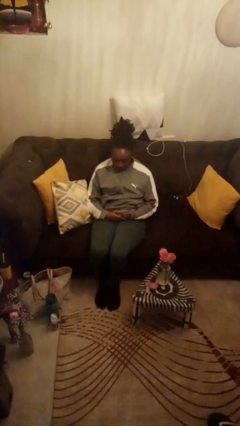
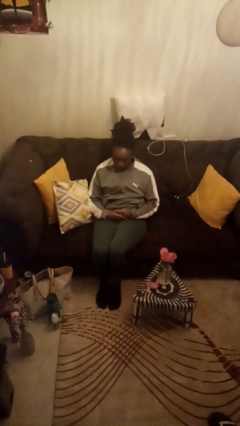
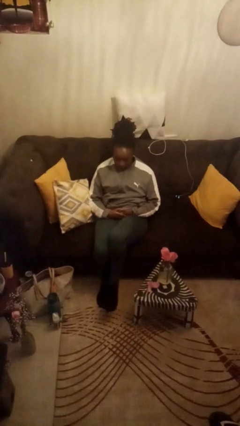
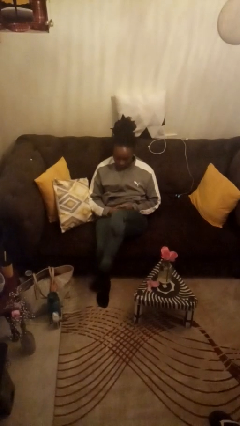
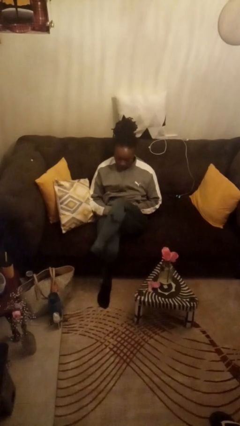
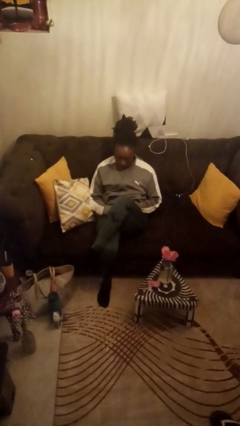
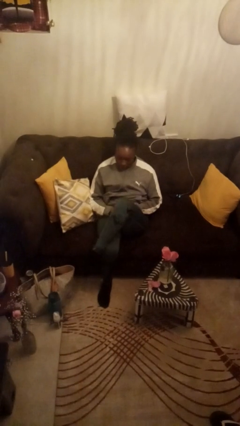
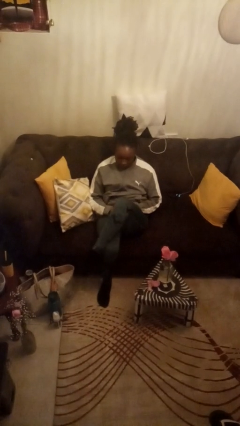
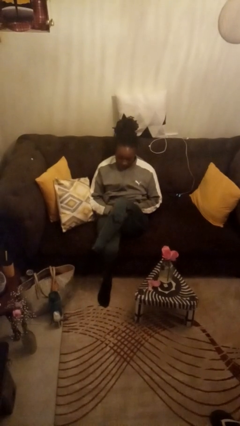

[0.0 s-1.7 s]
person crosses legs

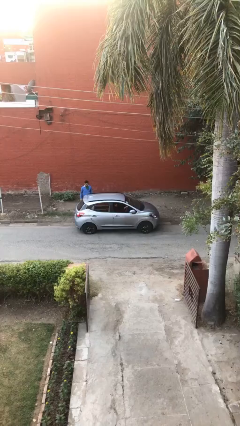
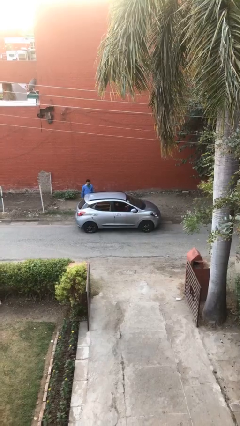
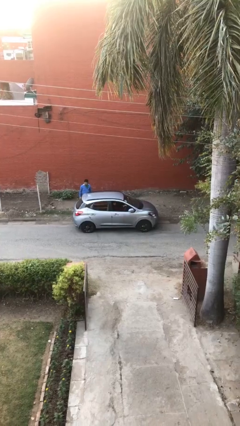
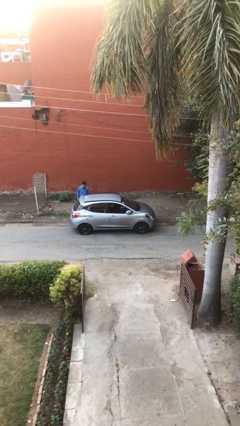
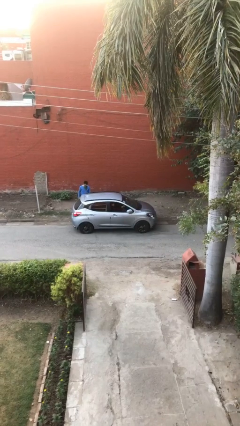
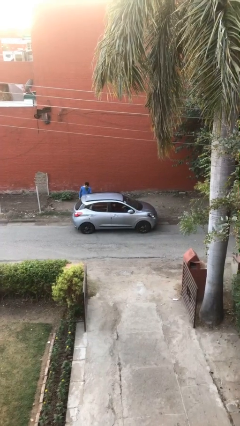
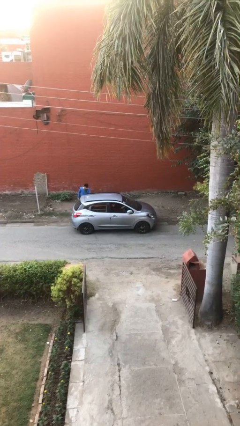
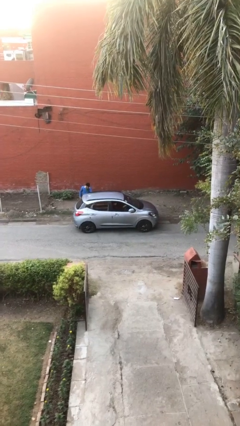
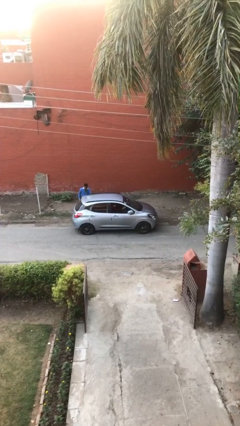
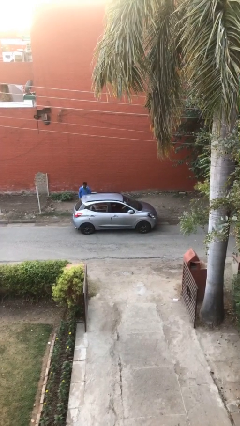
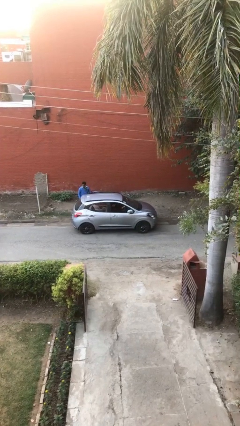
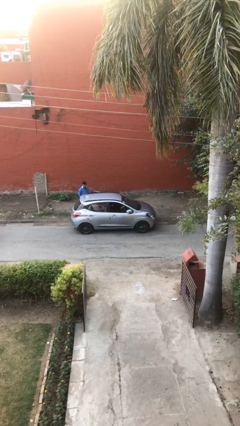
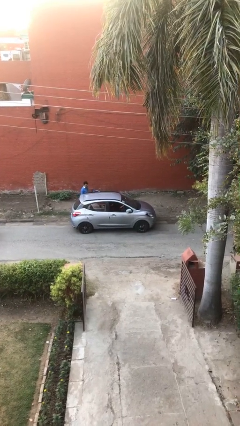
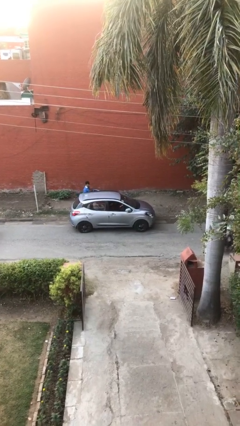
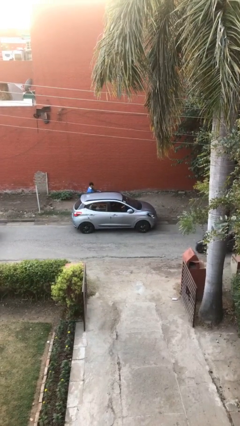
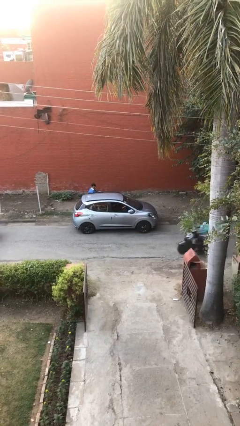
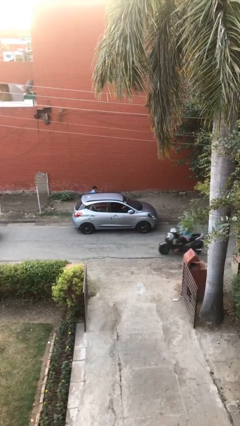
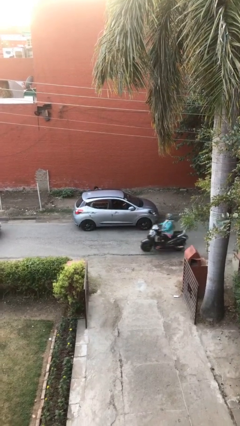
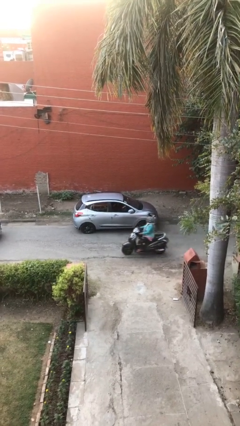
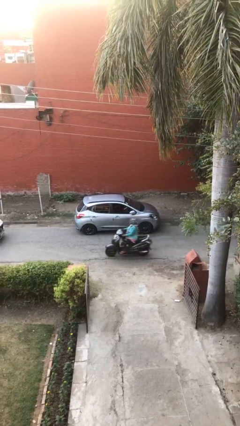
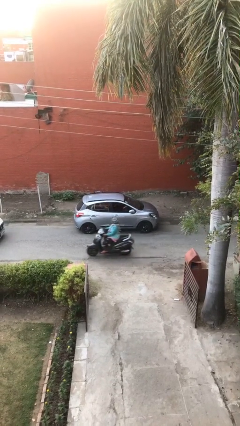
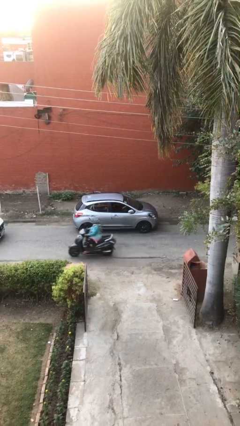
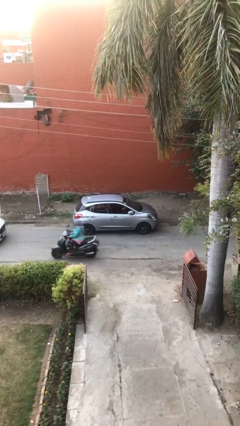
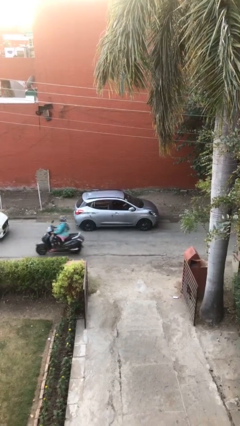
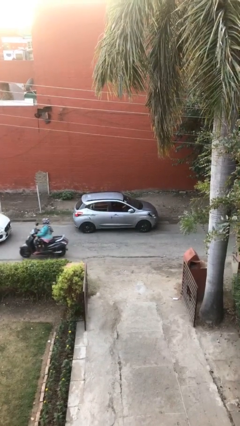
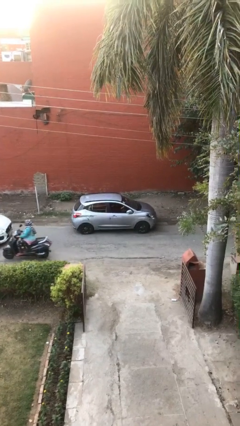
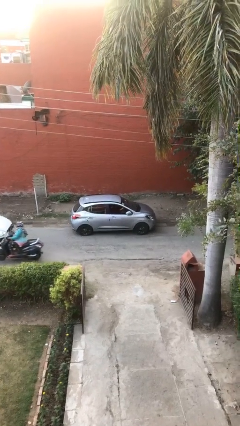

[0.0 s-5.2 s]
car picks up person

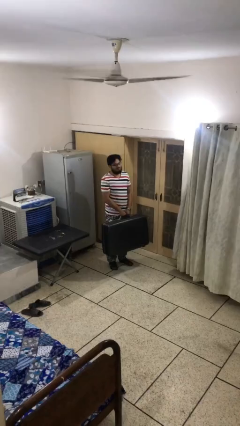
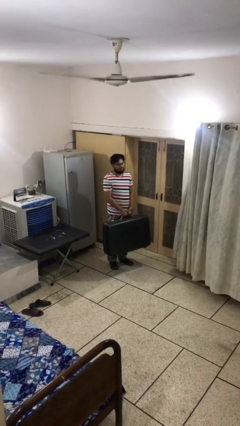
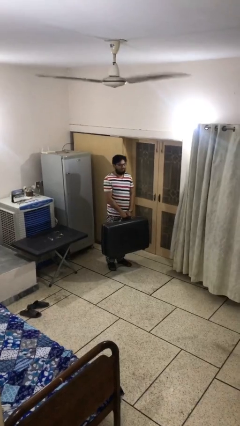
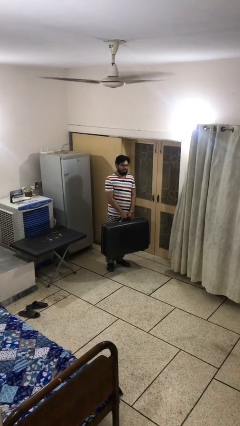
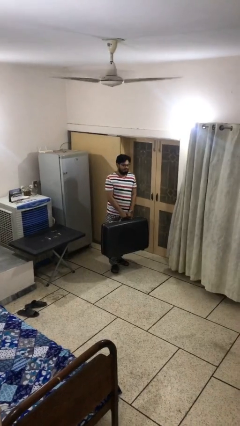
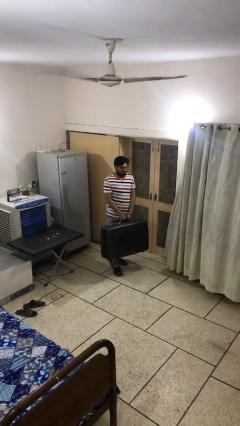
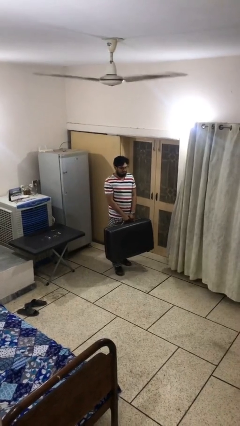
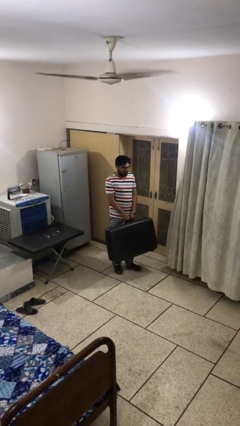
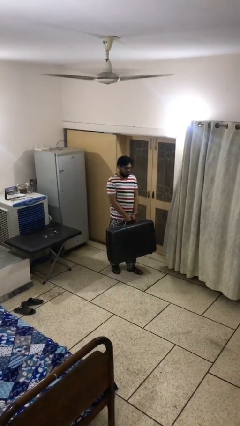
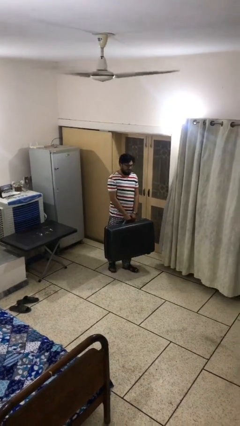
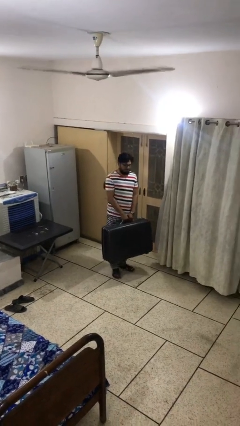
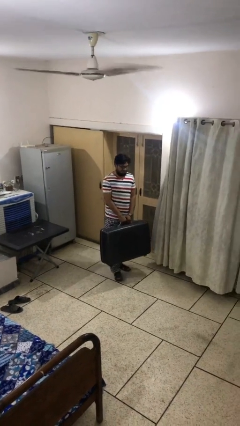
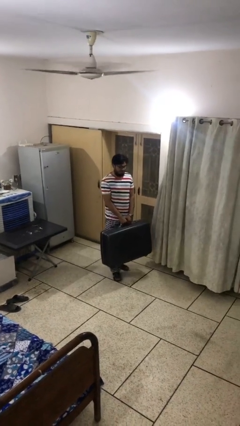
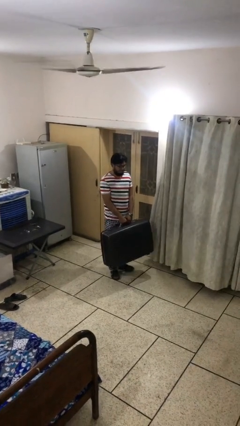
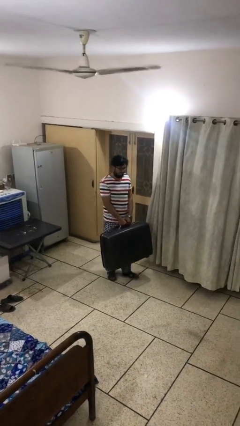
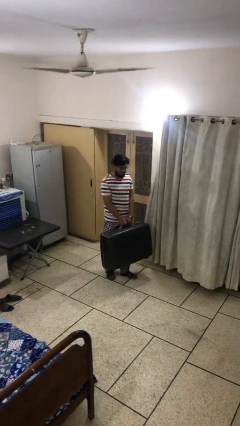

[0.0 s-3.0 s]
person carries heavy object

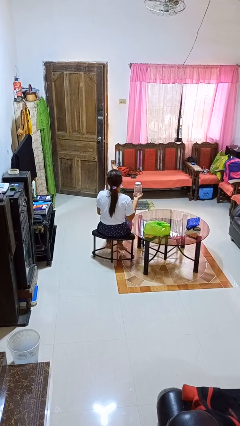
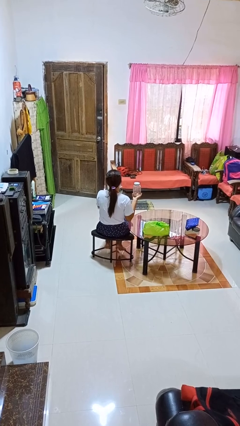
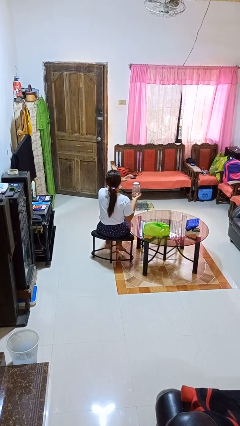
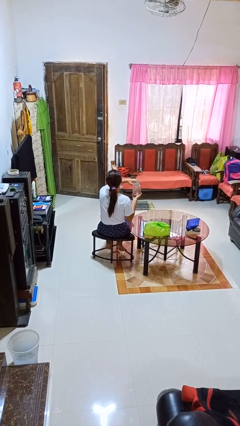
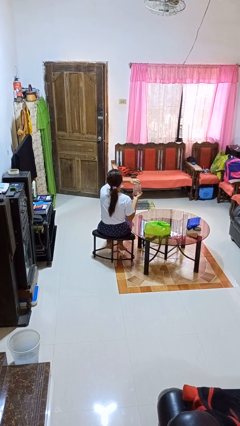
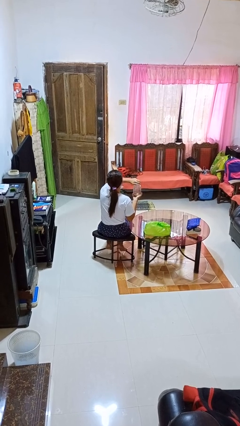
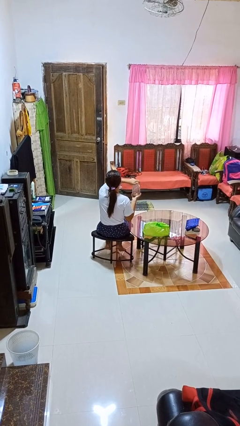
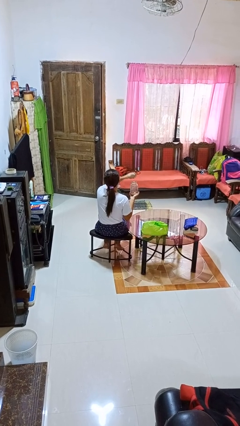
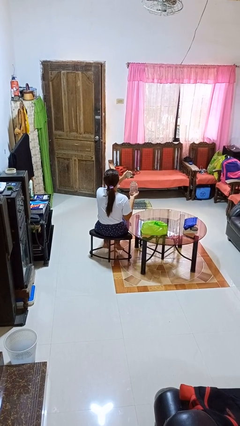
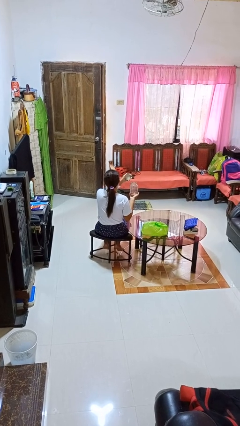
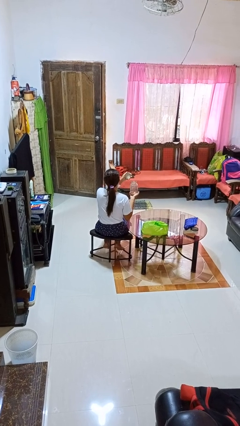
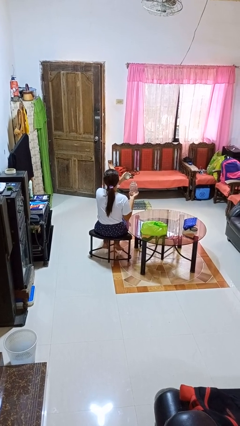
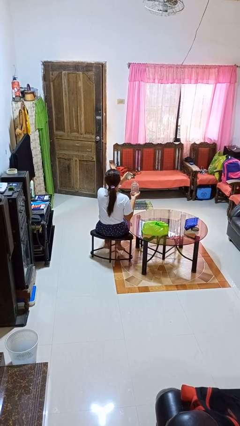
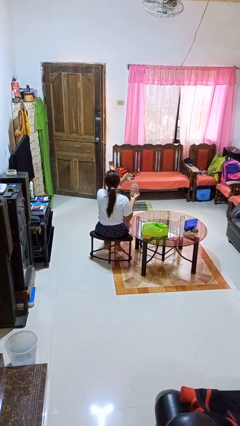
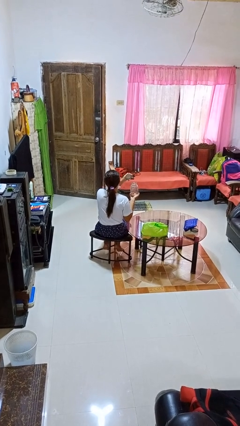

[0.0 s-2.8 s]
person opens jar

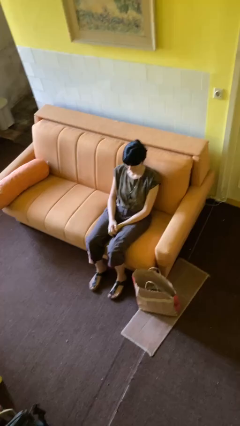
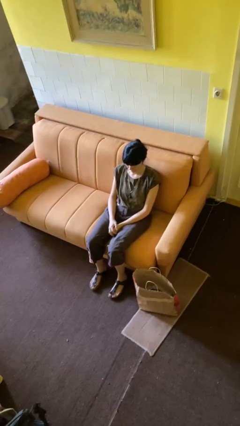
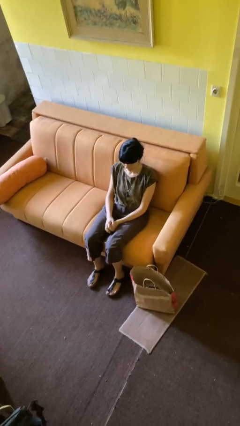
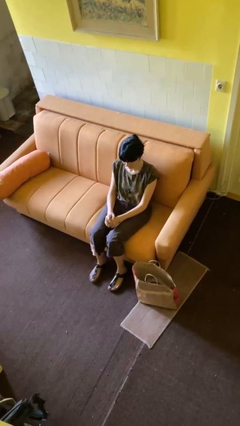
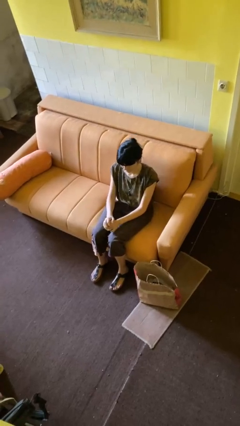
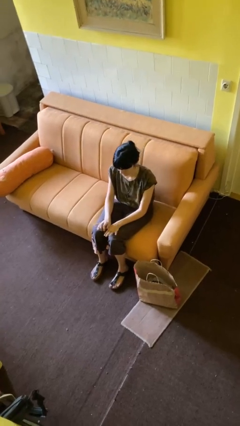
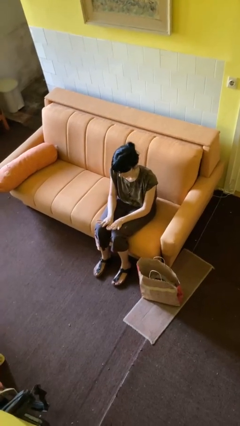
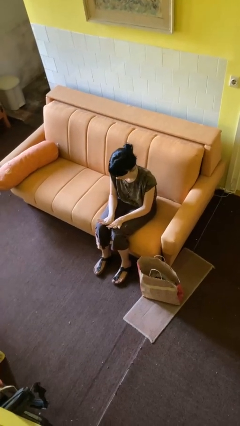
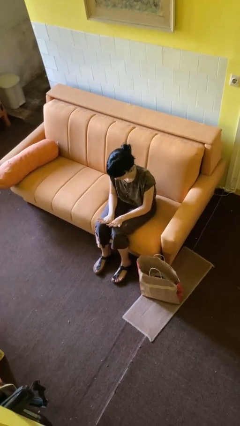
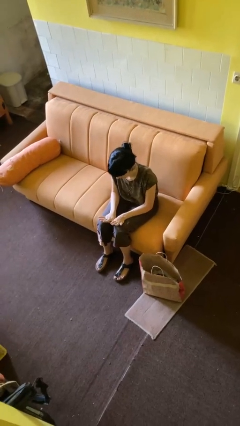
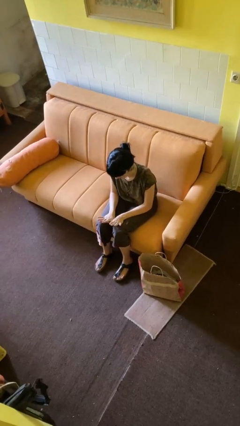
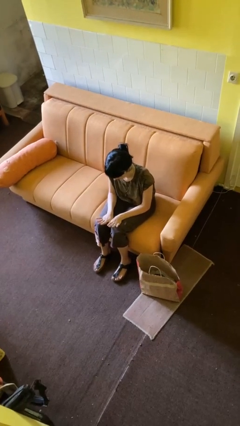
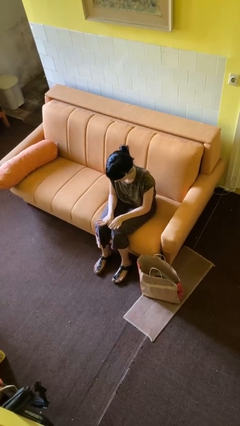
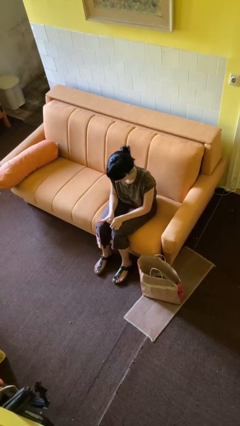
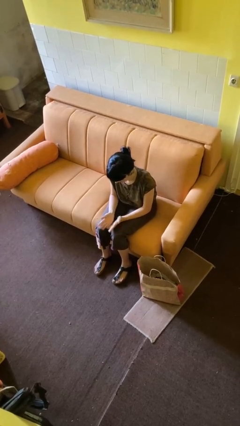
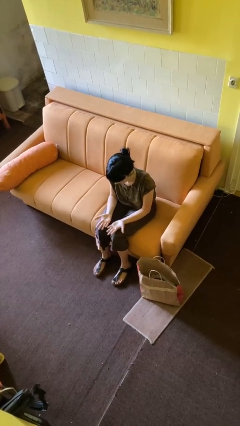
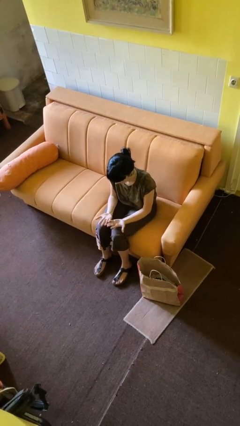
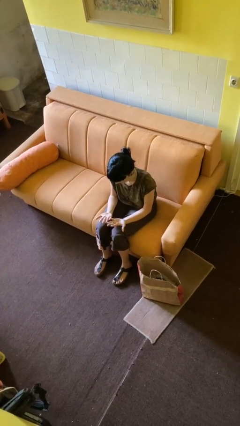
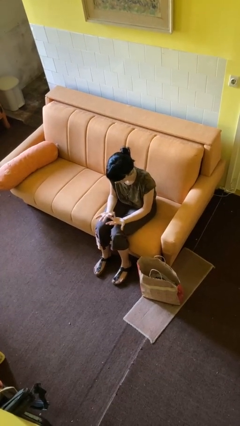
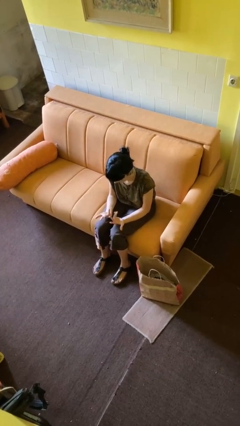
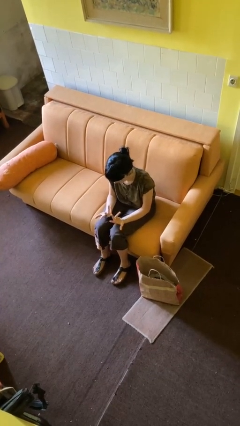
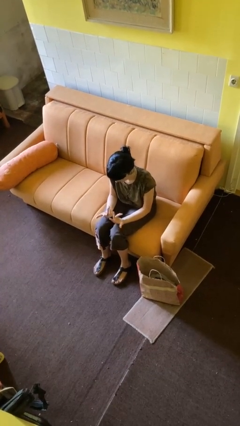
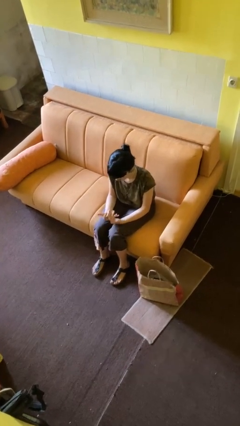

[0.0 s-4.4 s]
person looks at hands in lap

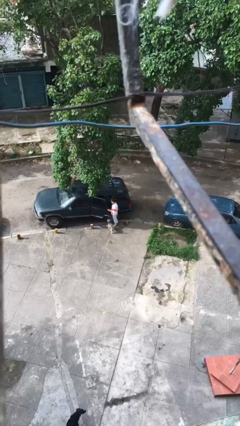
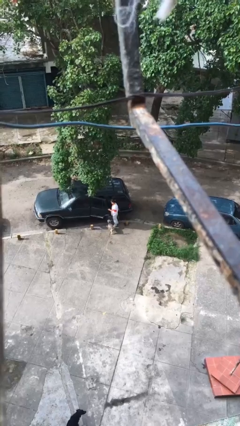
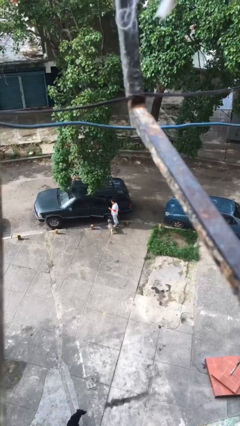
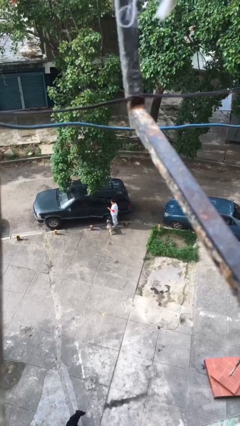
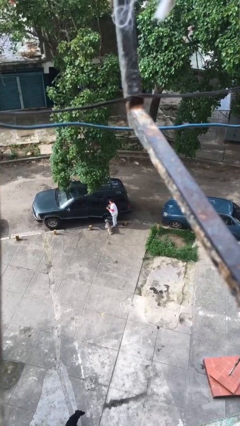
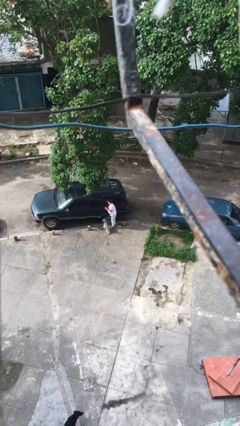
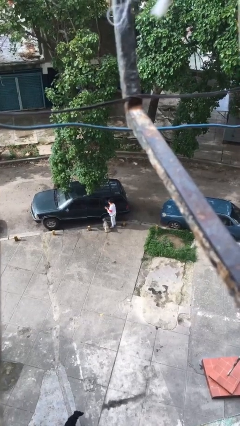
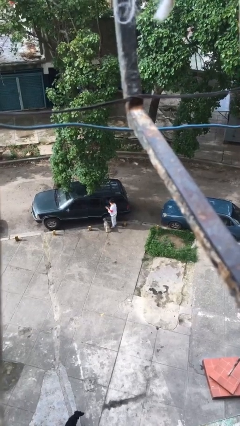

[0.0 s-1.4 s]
person closes car door
